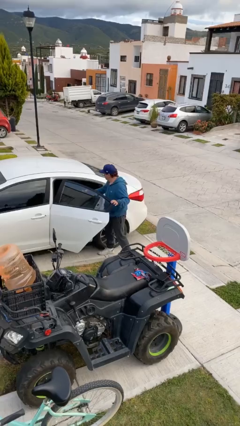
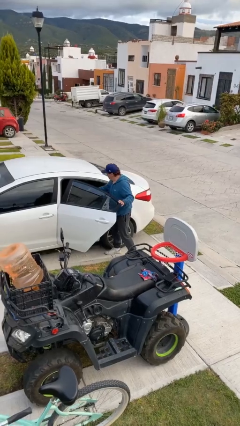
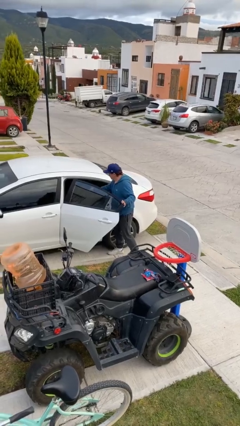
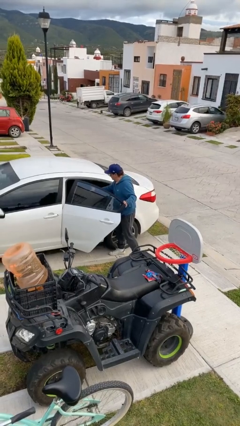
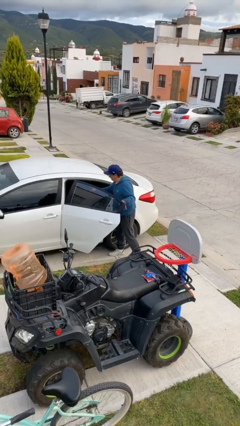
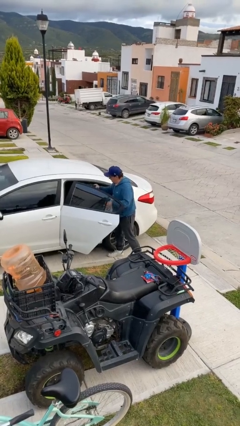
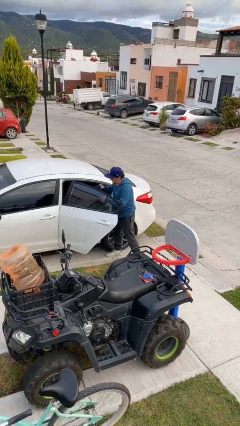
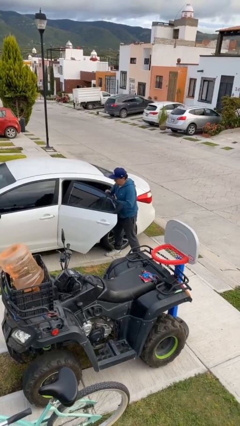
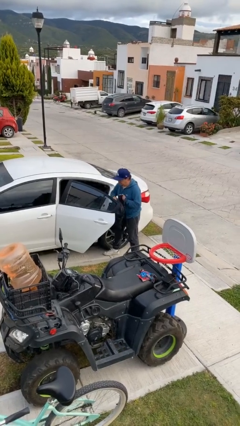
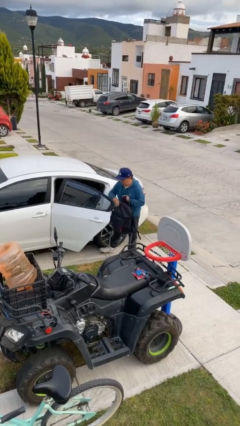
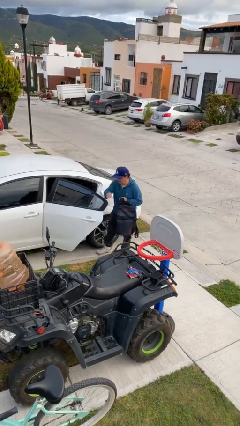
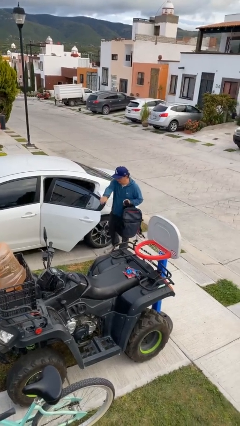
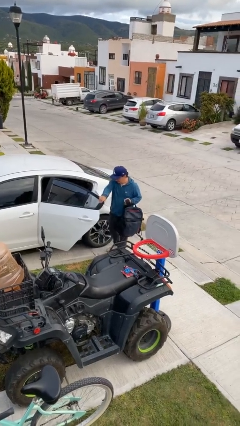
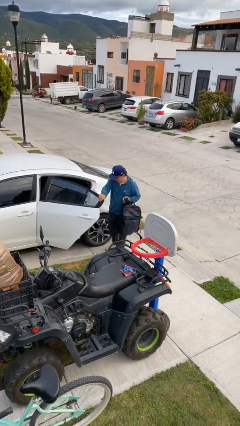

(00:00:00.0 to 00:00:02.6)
person unloads car

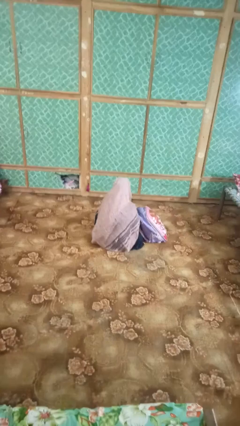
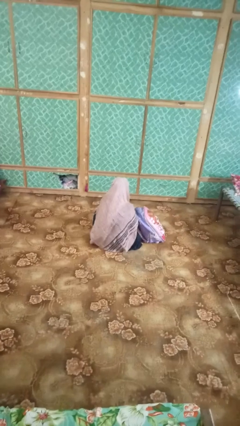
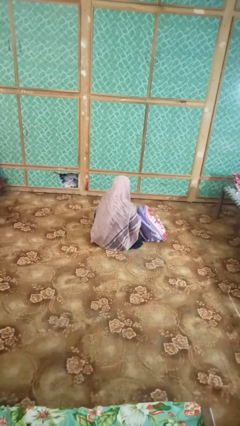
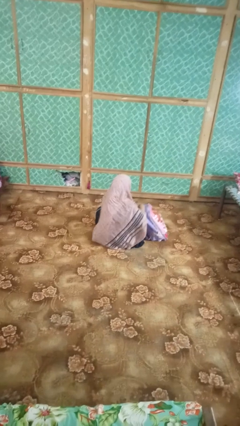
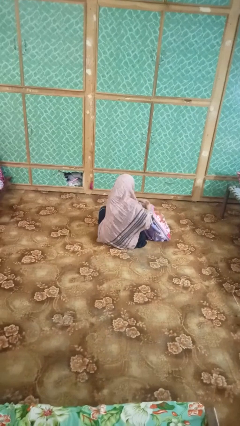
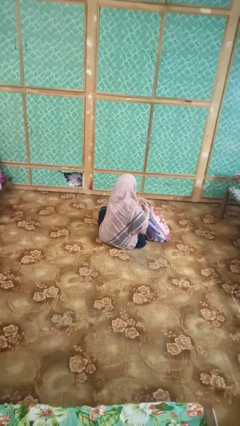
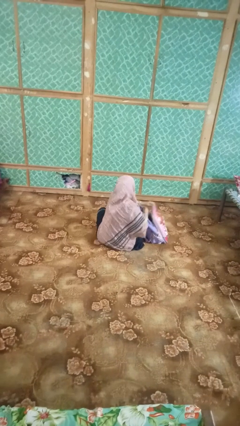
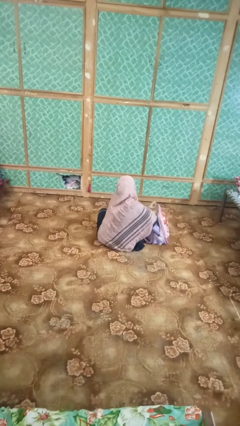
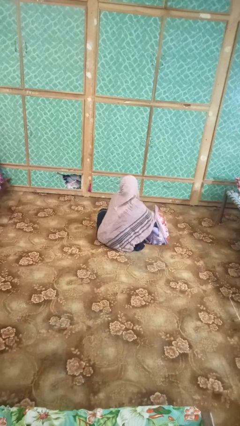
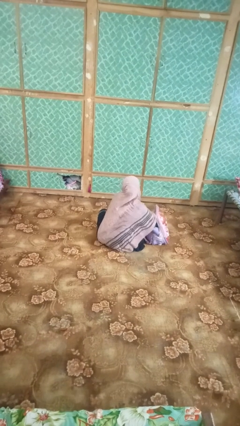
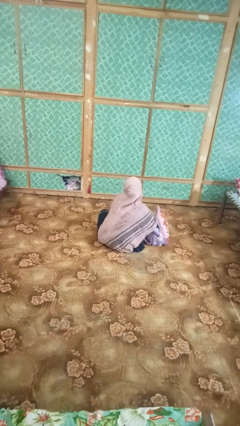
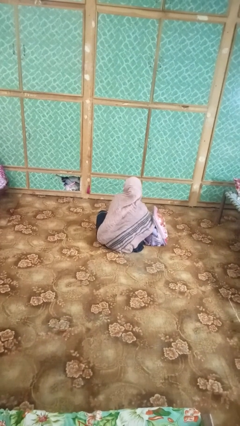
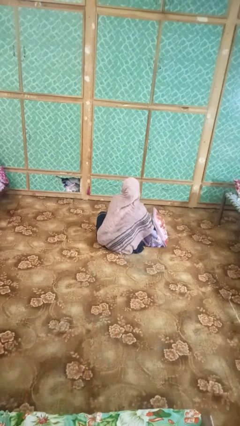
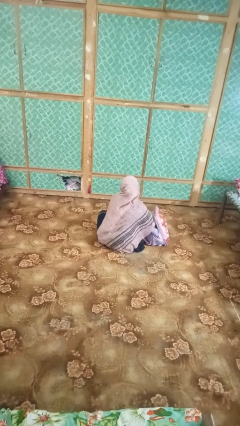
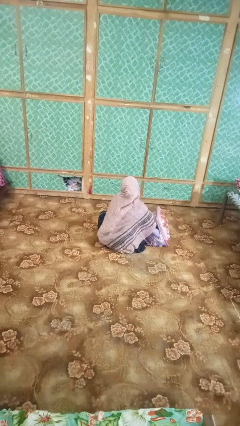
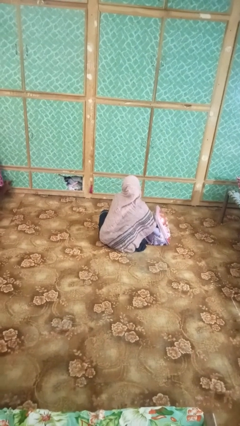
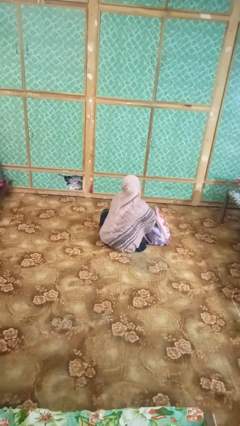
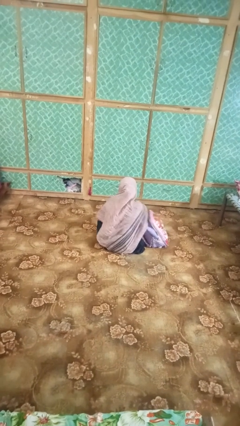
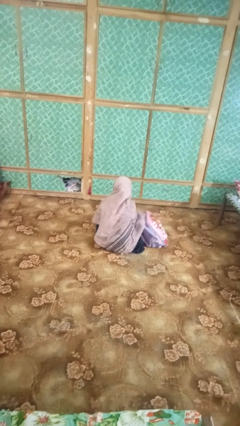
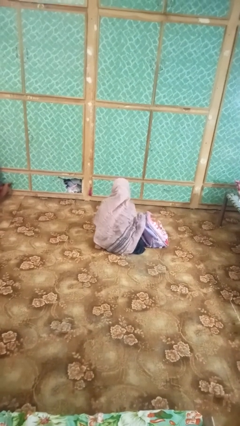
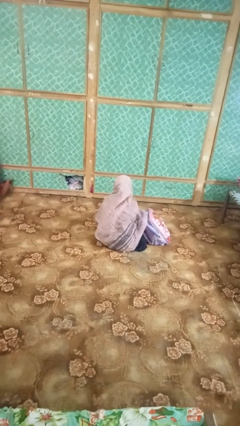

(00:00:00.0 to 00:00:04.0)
person searches in bag

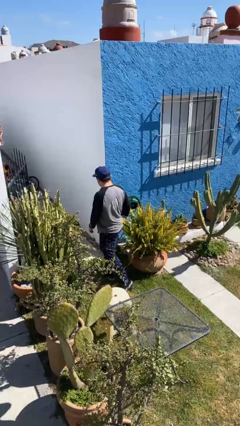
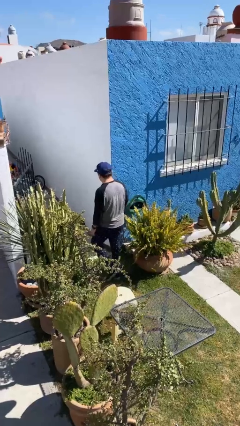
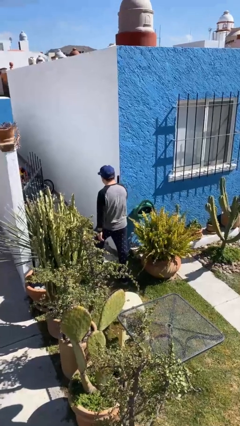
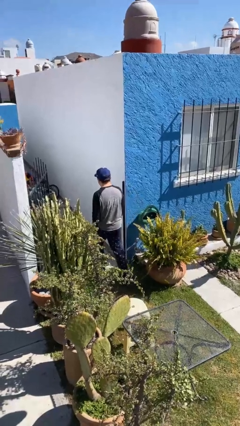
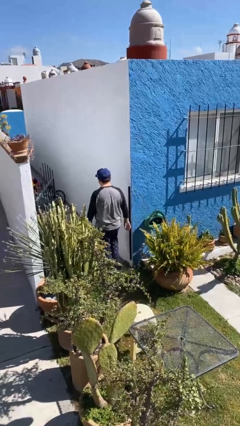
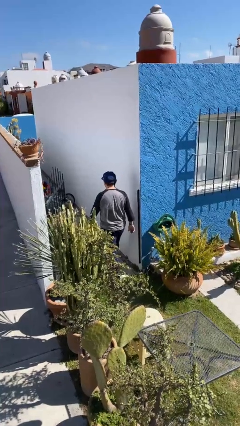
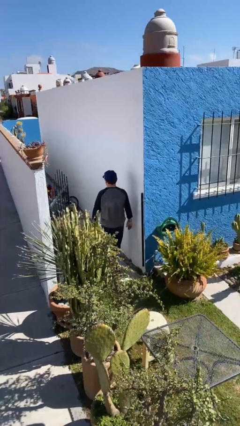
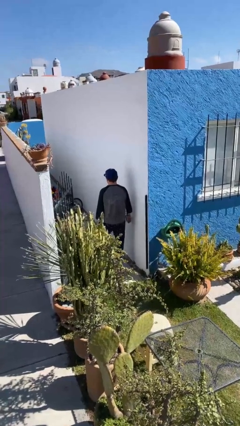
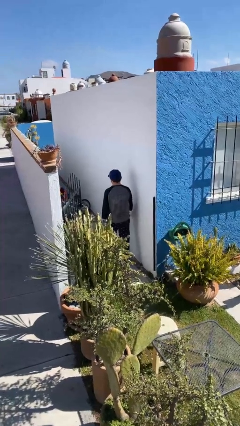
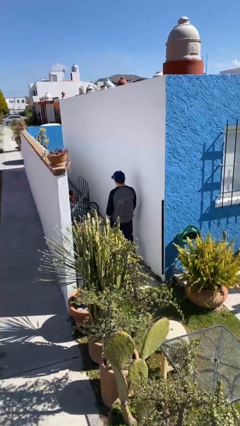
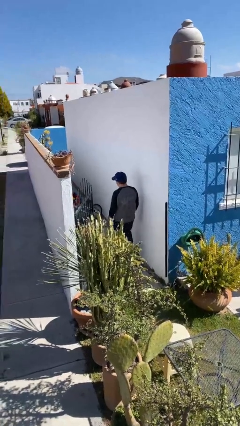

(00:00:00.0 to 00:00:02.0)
person exits scene through structure

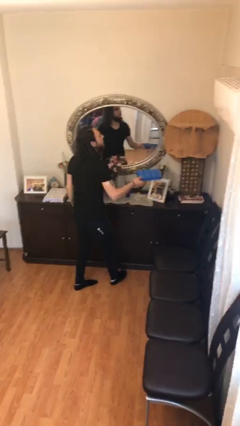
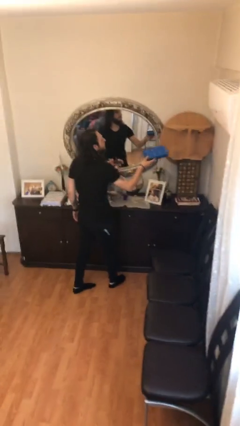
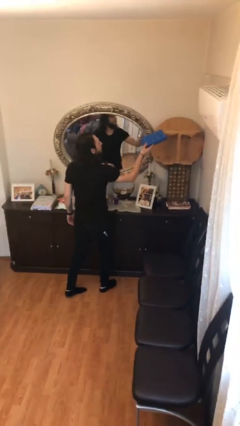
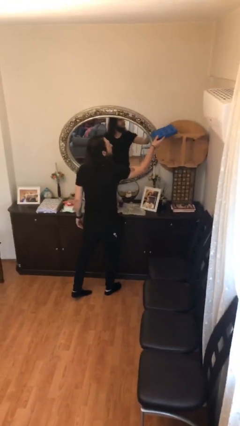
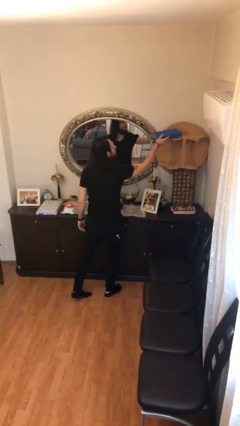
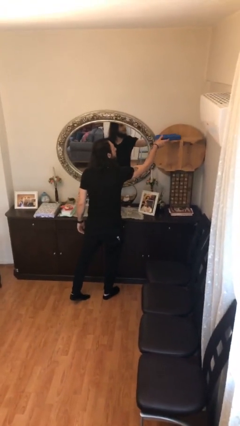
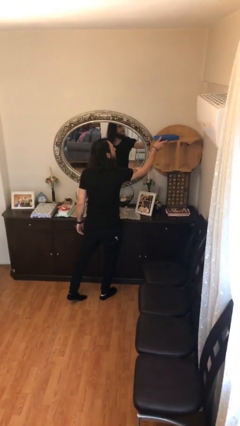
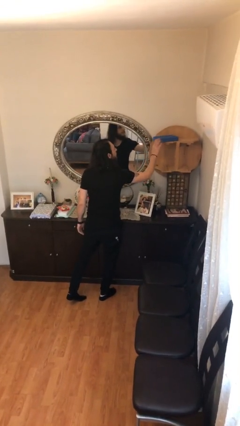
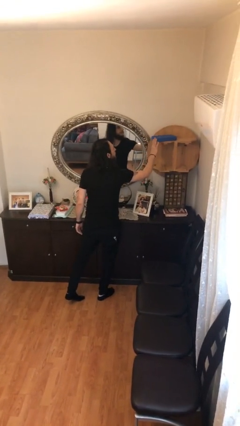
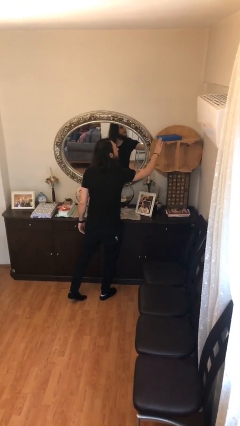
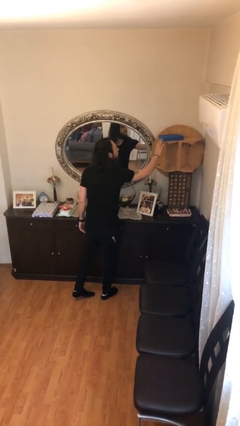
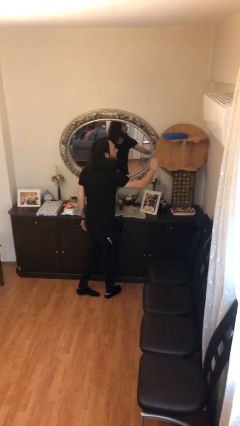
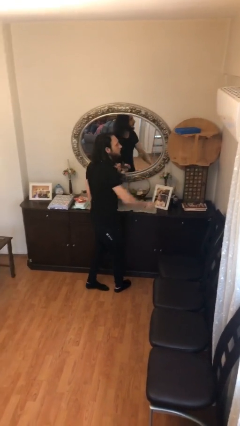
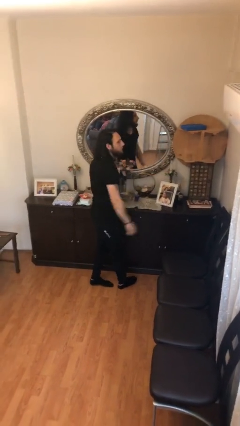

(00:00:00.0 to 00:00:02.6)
person puts down object on shelf

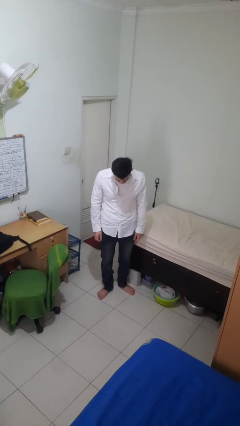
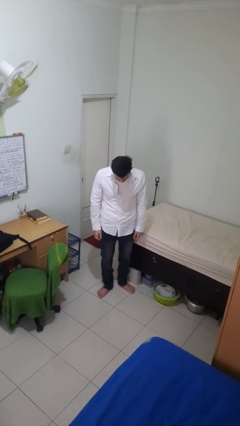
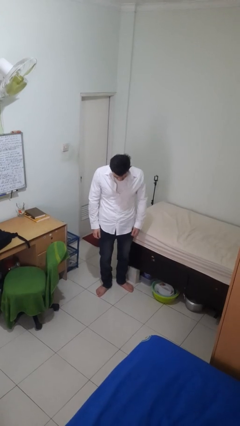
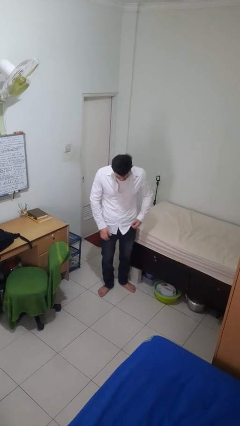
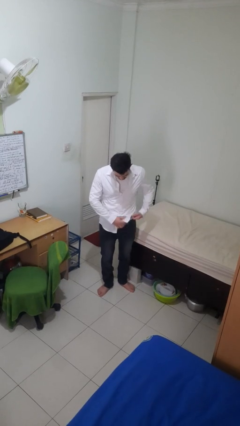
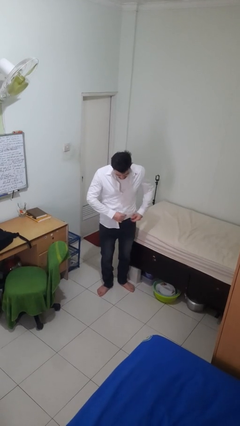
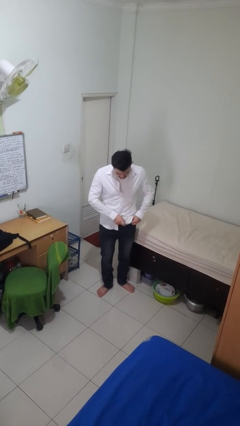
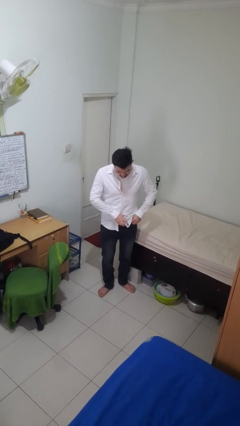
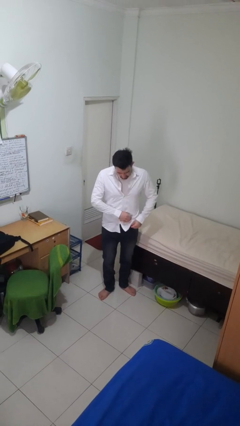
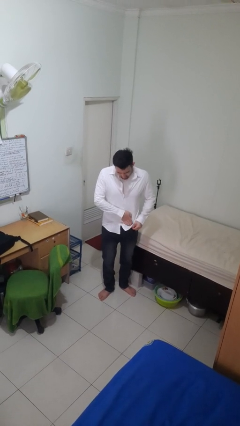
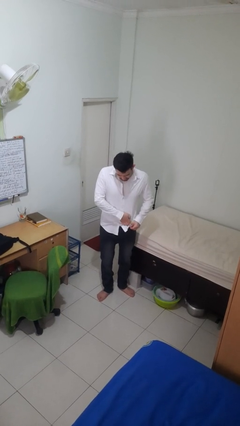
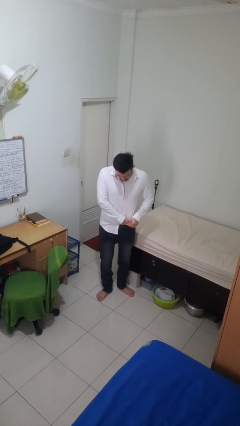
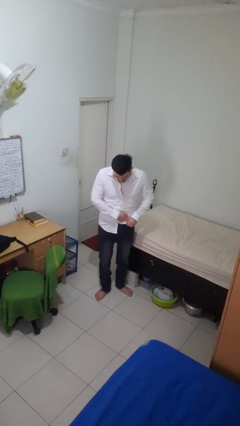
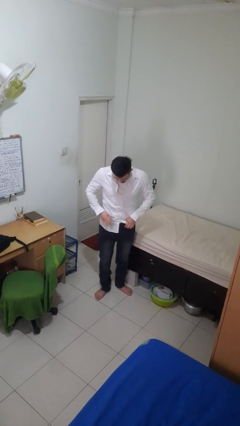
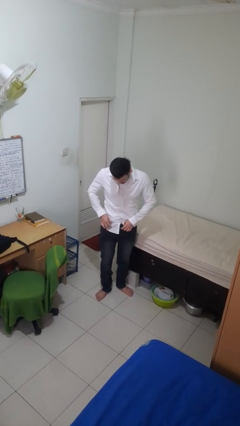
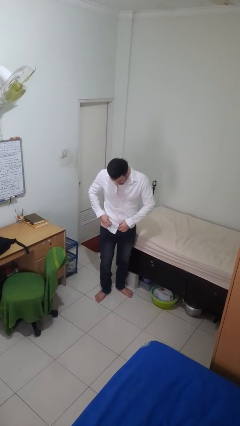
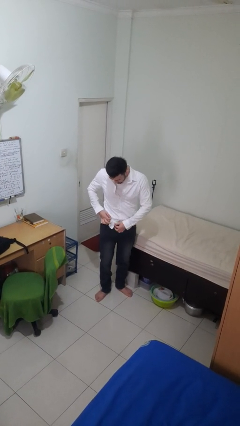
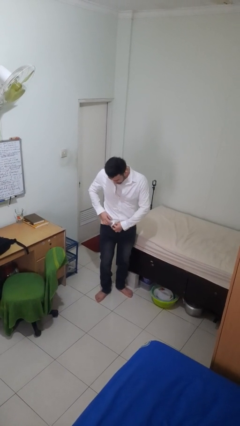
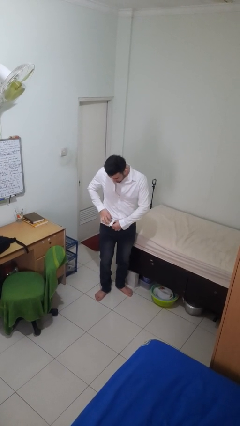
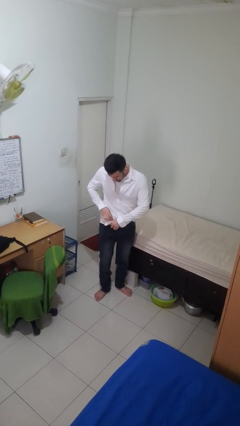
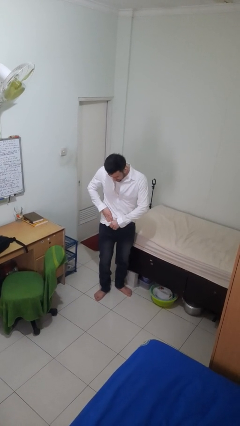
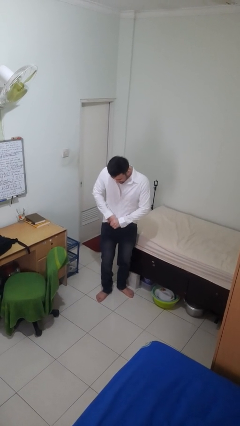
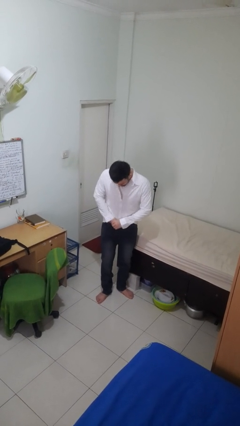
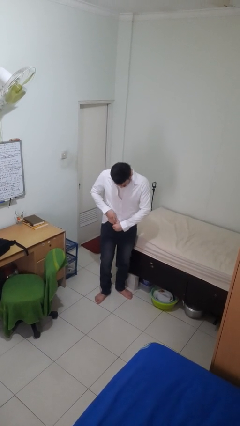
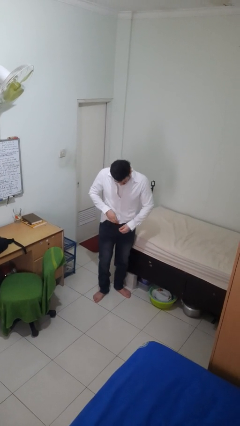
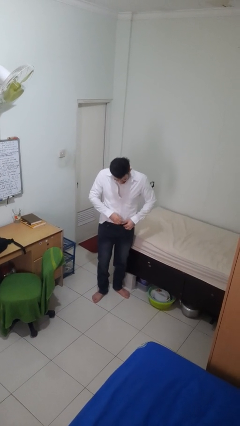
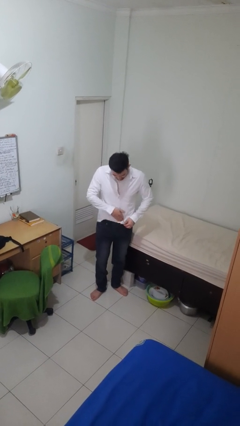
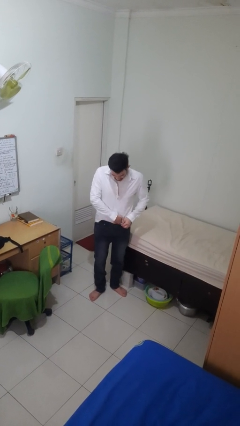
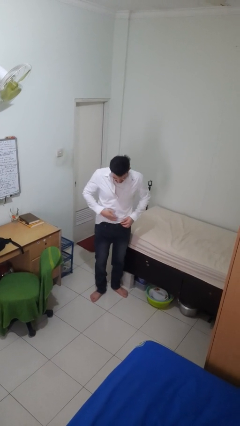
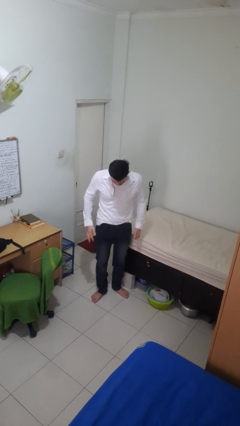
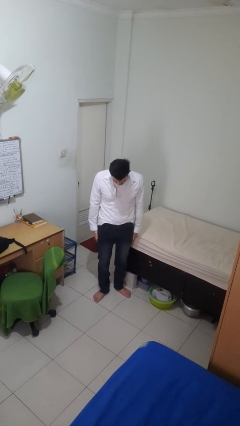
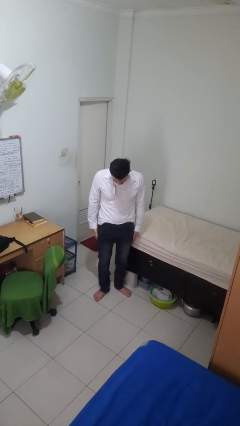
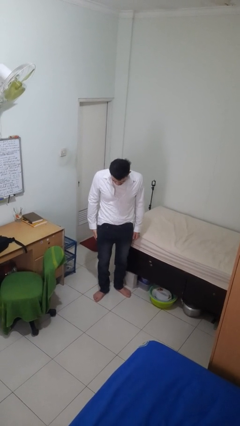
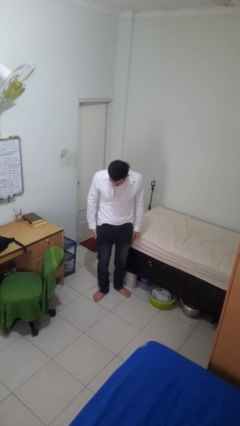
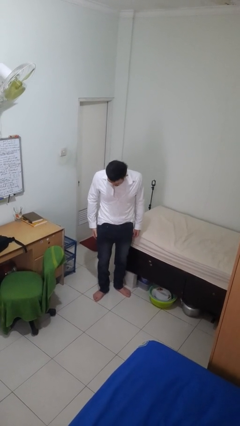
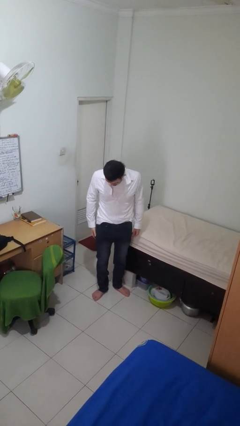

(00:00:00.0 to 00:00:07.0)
person tucks in shirt
